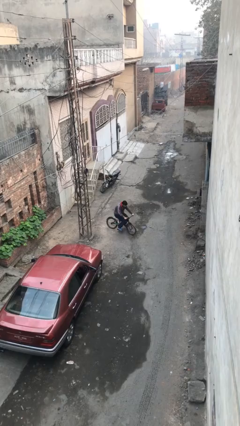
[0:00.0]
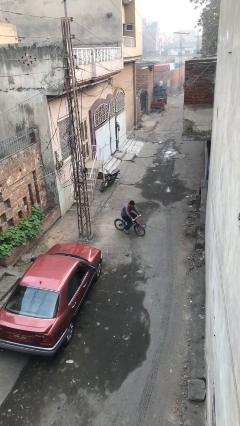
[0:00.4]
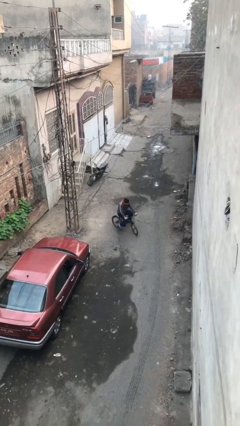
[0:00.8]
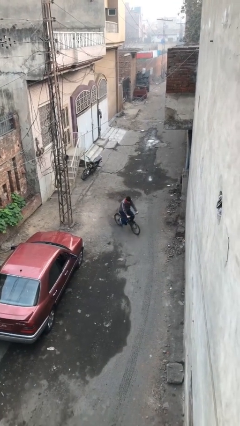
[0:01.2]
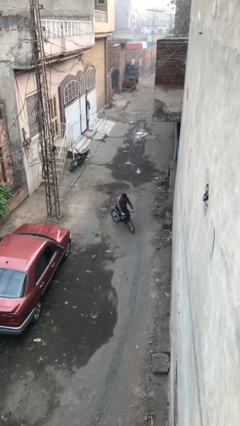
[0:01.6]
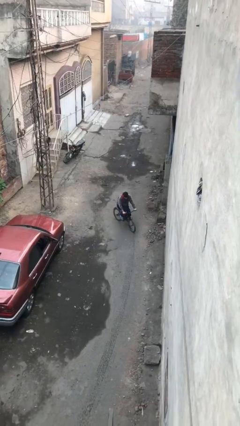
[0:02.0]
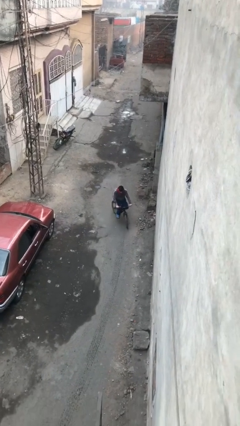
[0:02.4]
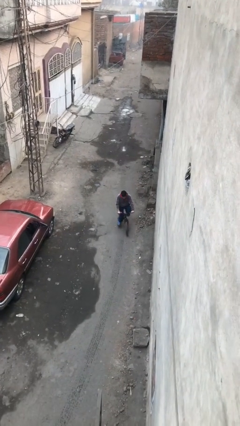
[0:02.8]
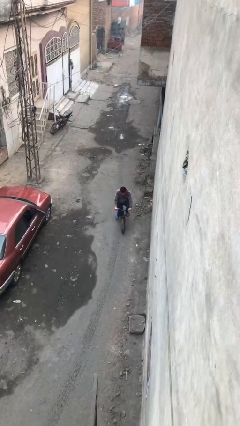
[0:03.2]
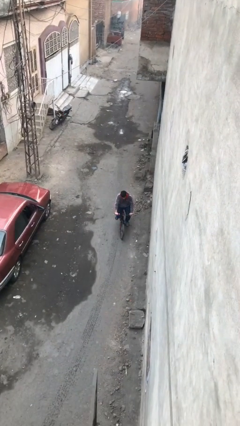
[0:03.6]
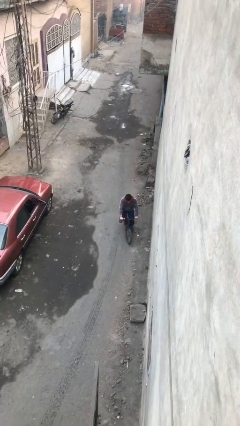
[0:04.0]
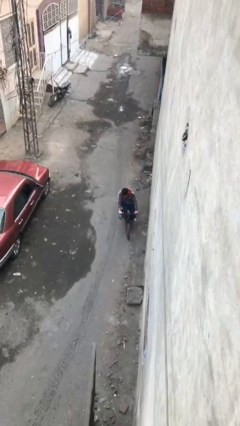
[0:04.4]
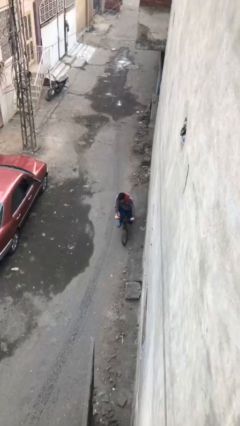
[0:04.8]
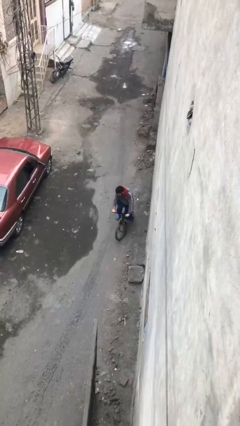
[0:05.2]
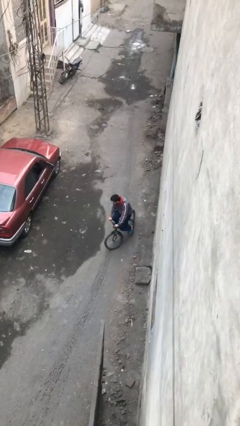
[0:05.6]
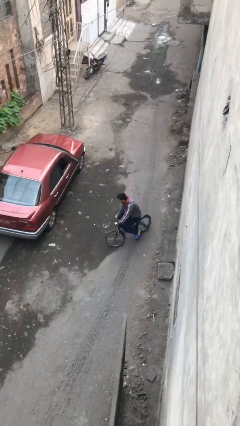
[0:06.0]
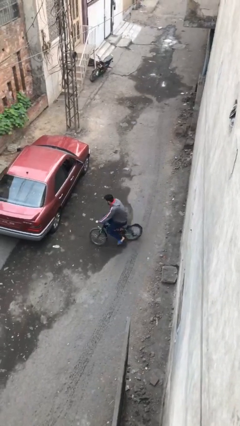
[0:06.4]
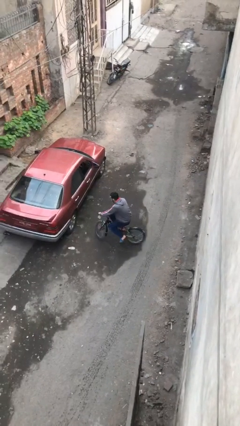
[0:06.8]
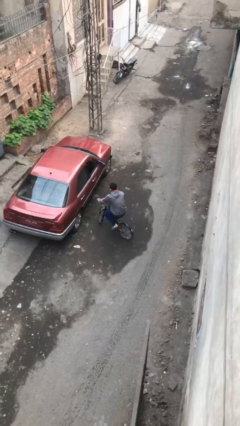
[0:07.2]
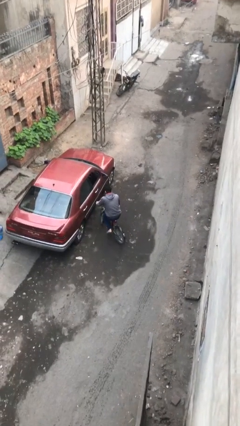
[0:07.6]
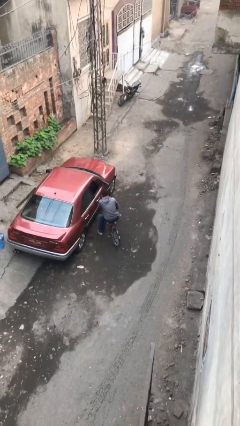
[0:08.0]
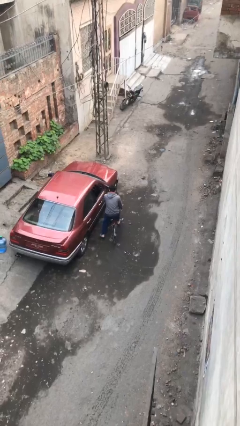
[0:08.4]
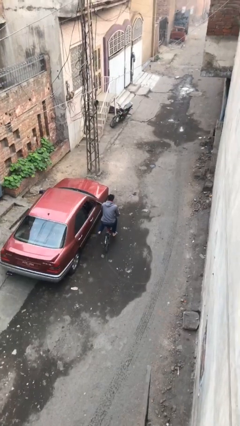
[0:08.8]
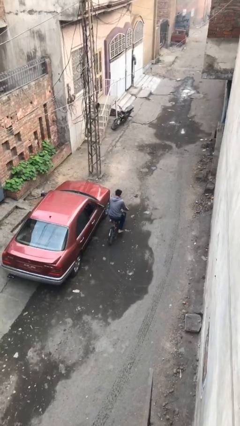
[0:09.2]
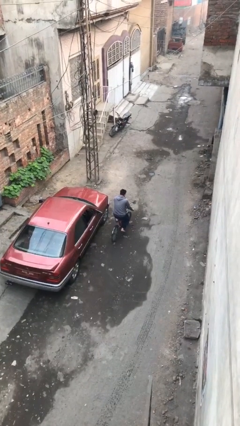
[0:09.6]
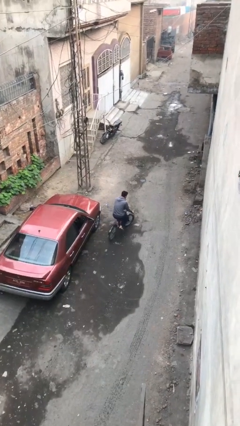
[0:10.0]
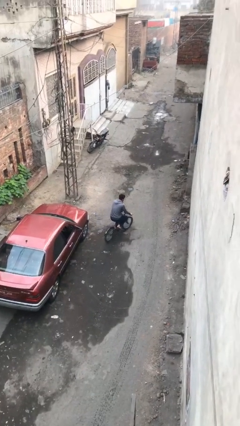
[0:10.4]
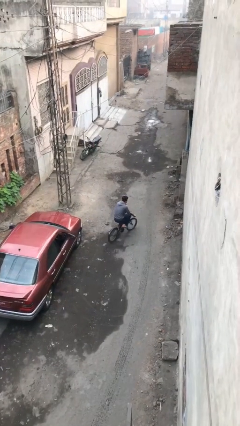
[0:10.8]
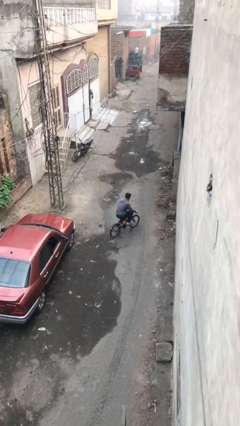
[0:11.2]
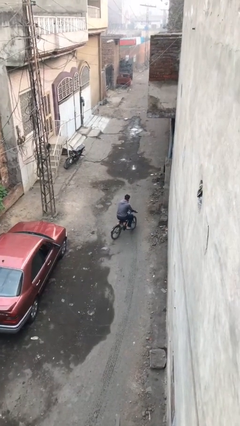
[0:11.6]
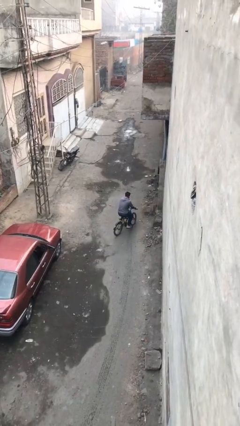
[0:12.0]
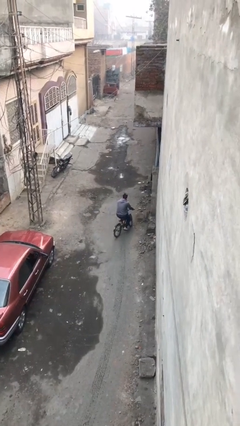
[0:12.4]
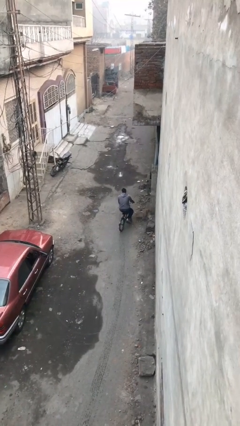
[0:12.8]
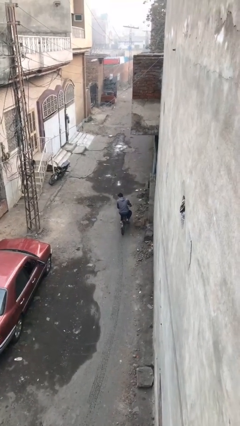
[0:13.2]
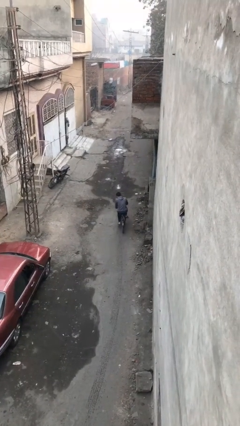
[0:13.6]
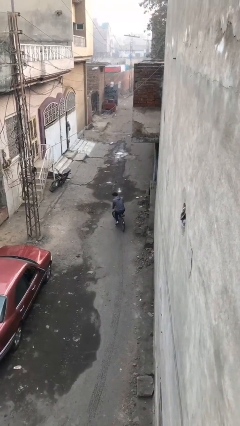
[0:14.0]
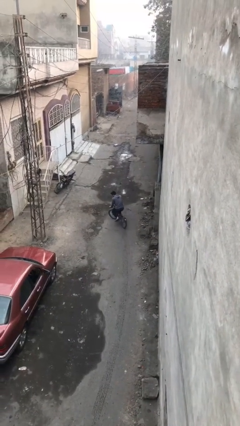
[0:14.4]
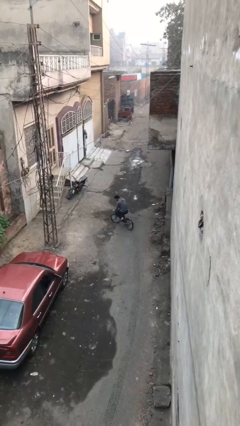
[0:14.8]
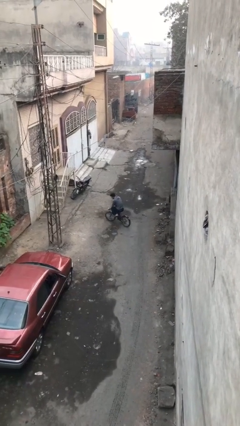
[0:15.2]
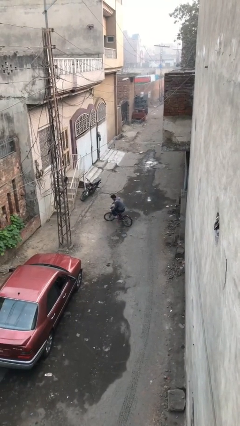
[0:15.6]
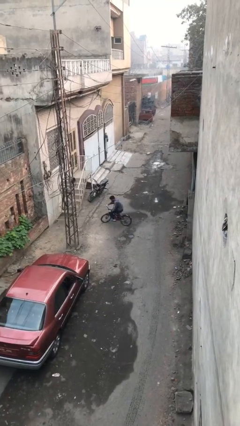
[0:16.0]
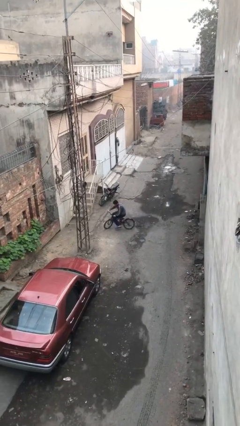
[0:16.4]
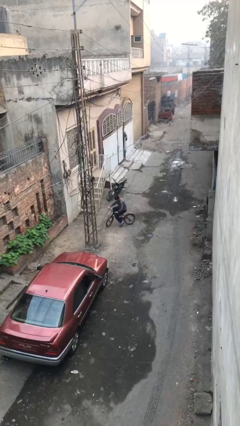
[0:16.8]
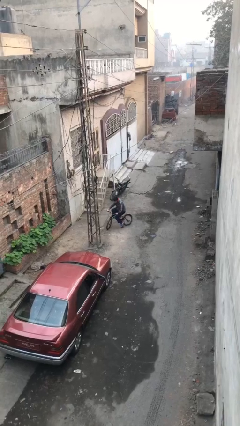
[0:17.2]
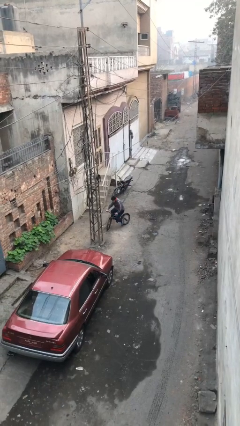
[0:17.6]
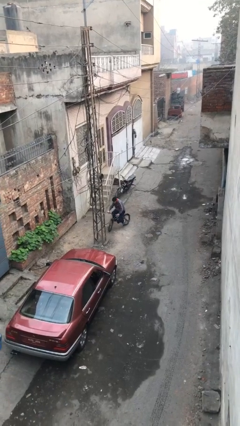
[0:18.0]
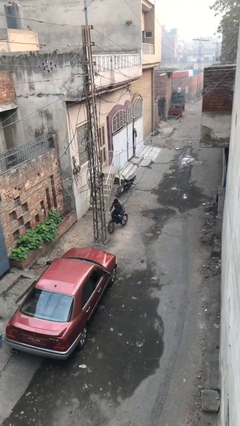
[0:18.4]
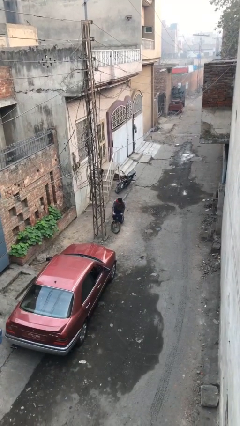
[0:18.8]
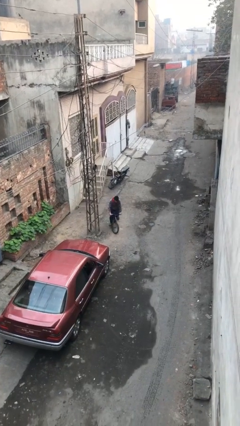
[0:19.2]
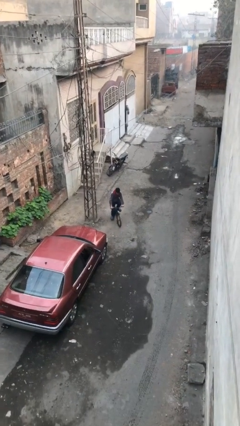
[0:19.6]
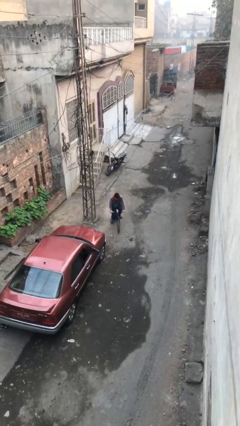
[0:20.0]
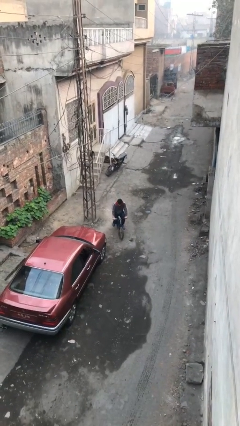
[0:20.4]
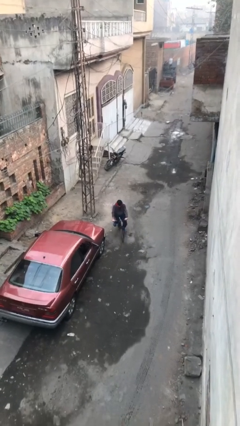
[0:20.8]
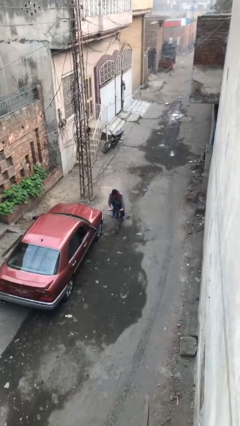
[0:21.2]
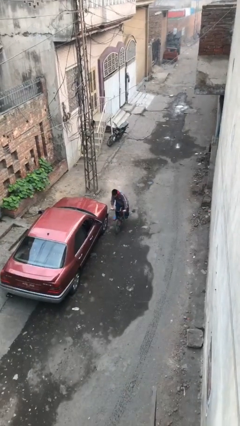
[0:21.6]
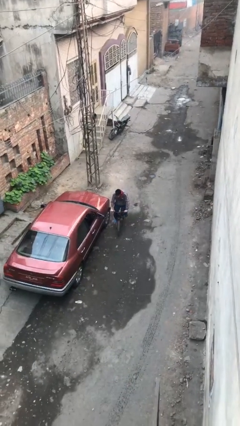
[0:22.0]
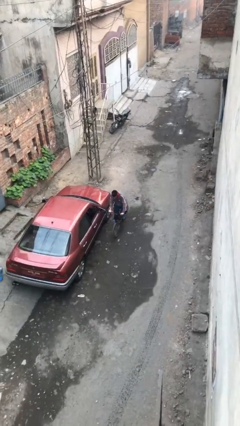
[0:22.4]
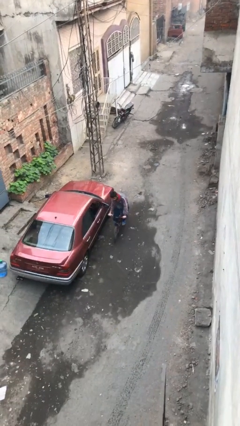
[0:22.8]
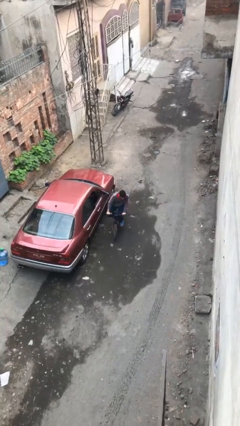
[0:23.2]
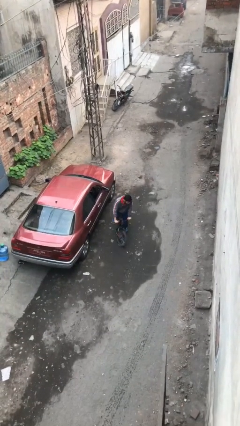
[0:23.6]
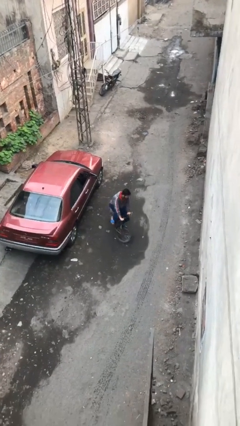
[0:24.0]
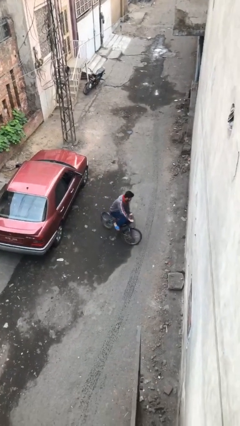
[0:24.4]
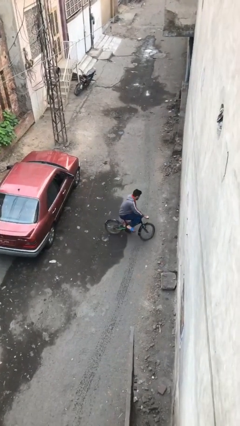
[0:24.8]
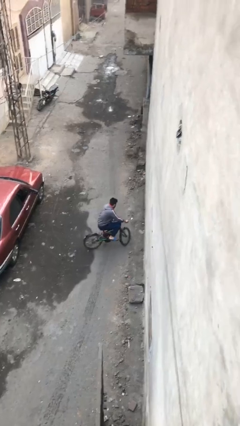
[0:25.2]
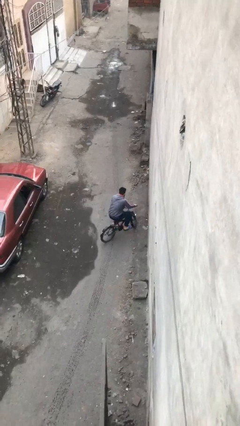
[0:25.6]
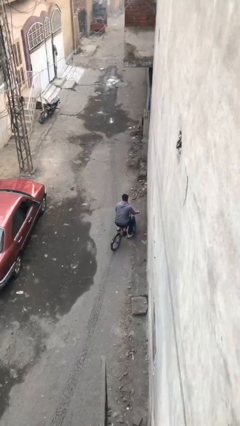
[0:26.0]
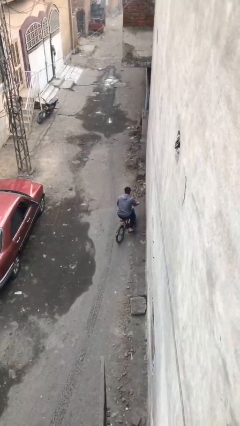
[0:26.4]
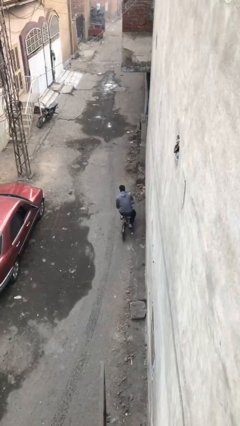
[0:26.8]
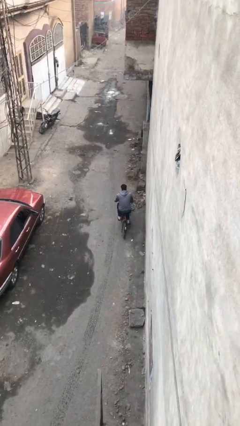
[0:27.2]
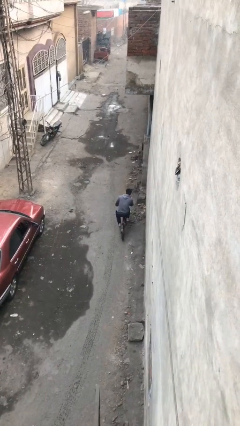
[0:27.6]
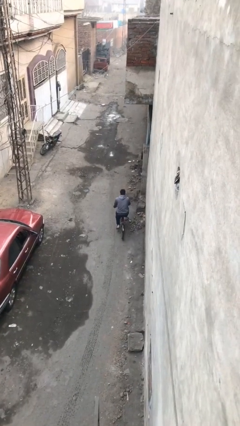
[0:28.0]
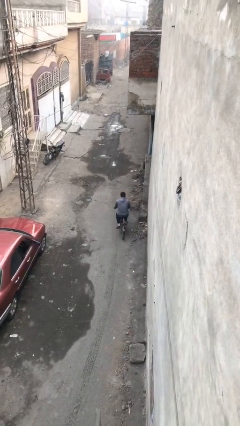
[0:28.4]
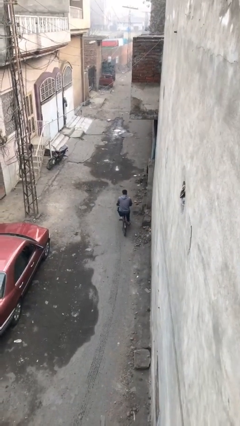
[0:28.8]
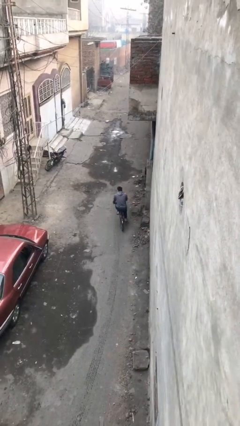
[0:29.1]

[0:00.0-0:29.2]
person rides bicycle

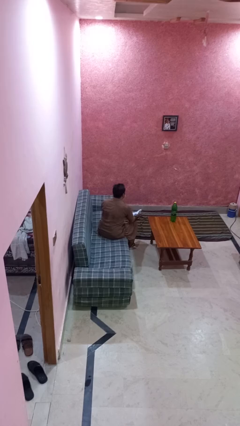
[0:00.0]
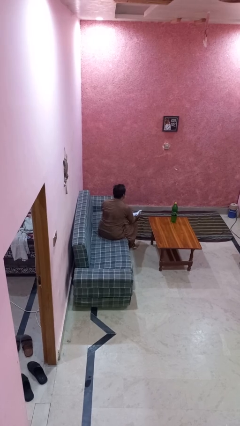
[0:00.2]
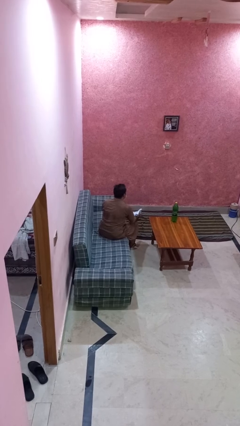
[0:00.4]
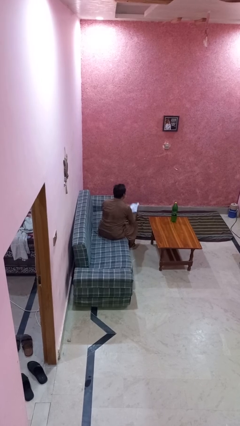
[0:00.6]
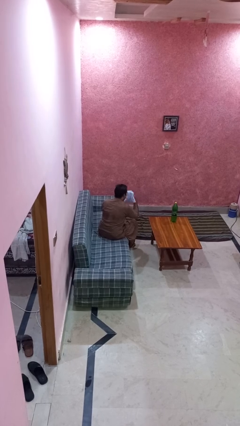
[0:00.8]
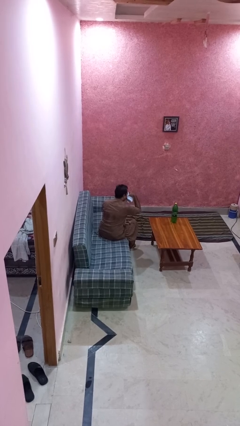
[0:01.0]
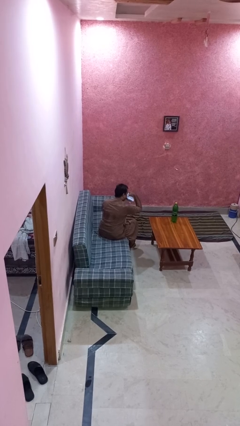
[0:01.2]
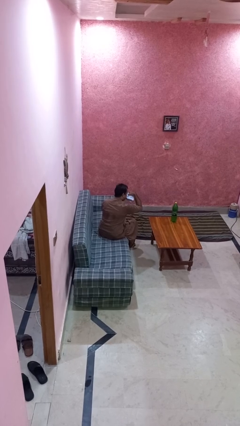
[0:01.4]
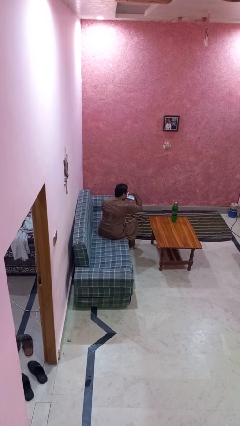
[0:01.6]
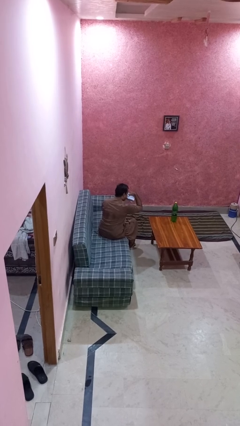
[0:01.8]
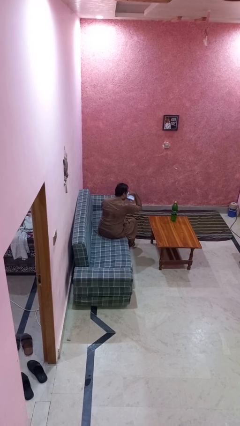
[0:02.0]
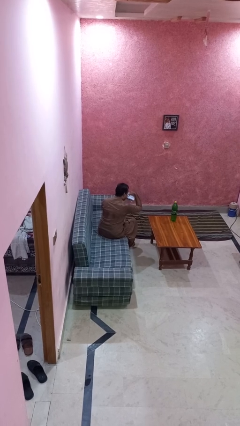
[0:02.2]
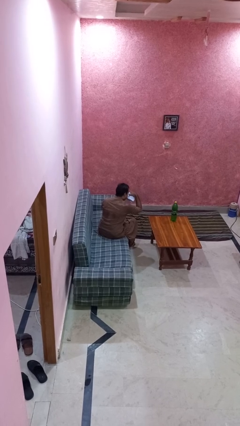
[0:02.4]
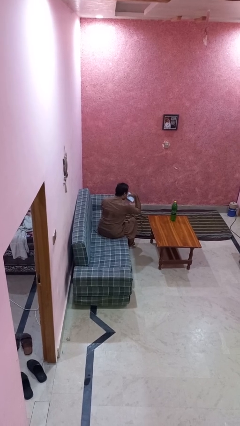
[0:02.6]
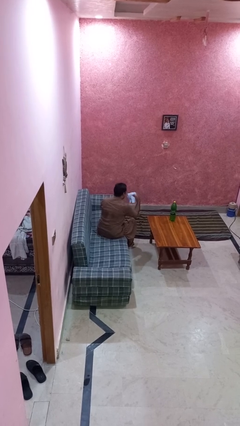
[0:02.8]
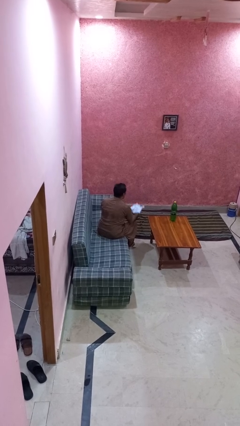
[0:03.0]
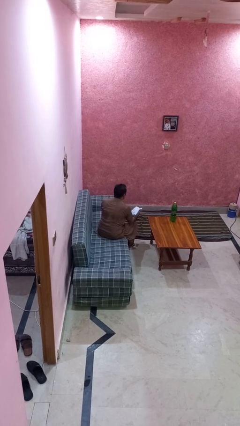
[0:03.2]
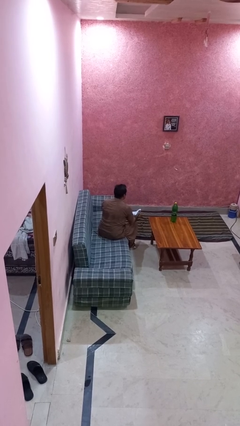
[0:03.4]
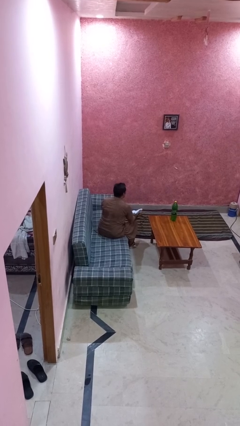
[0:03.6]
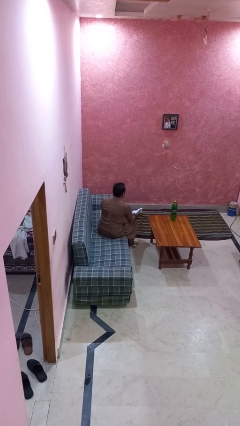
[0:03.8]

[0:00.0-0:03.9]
person blows nose
